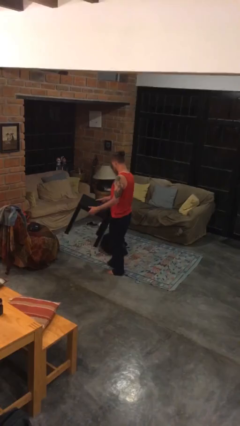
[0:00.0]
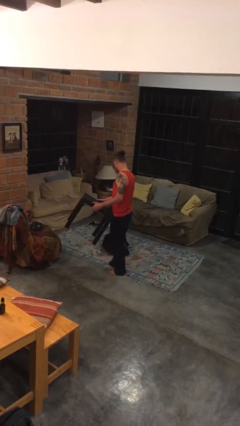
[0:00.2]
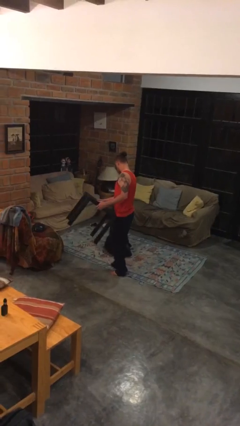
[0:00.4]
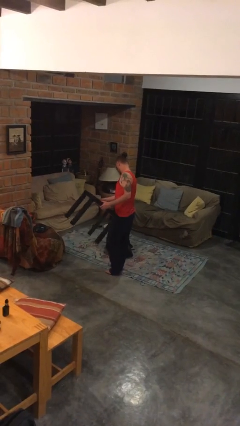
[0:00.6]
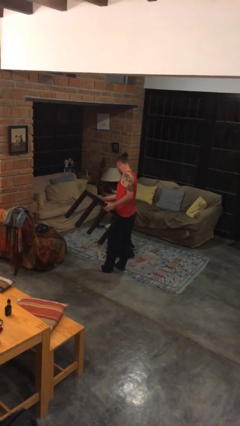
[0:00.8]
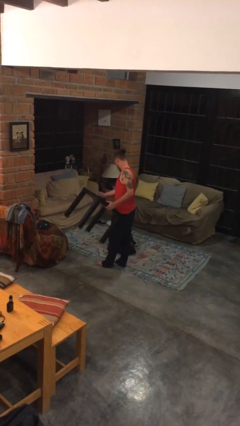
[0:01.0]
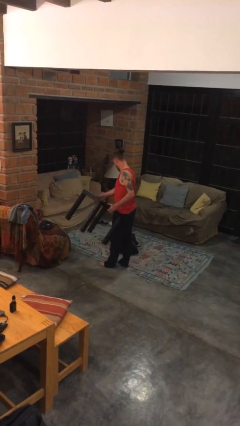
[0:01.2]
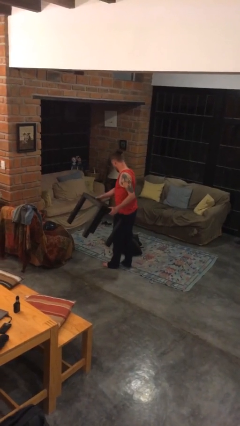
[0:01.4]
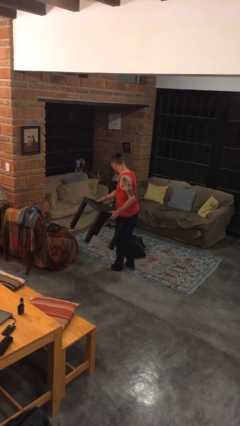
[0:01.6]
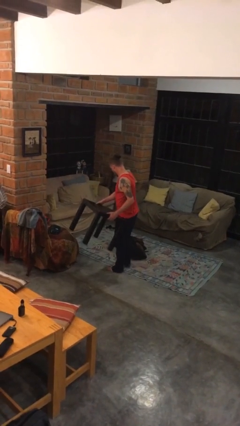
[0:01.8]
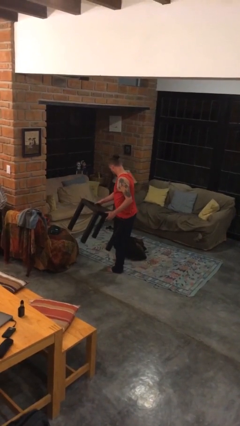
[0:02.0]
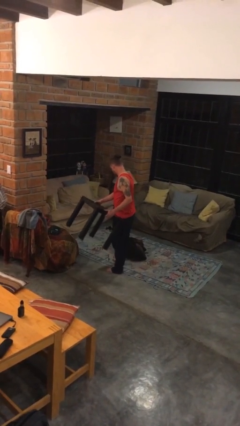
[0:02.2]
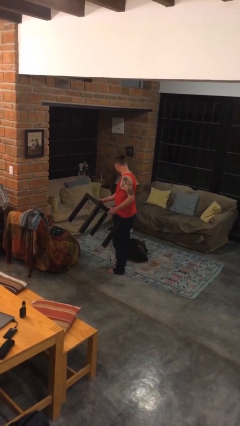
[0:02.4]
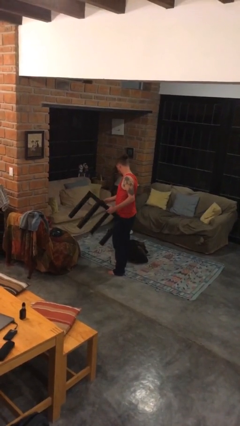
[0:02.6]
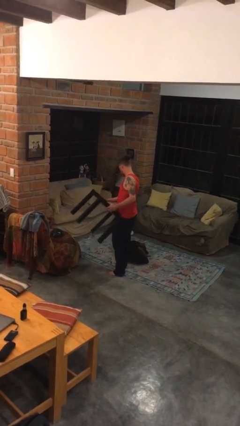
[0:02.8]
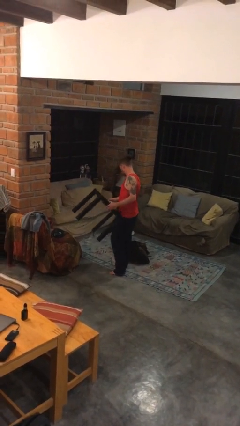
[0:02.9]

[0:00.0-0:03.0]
person carries furniture

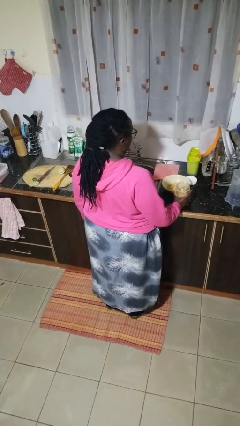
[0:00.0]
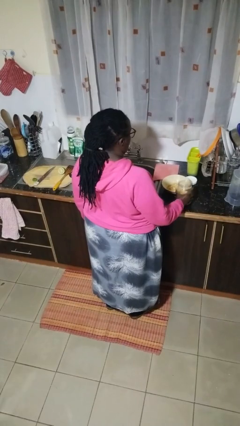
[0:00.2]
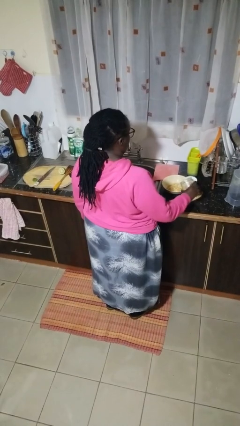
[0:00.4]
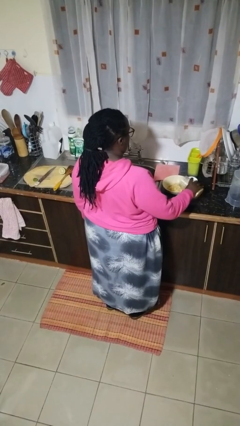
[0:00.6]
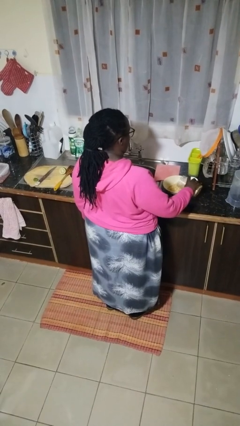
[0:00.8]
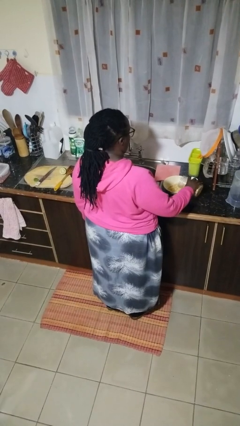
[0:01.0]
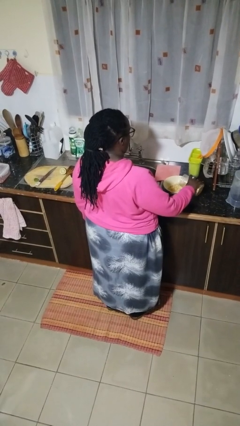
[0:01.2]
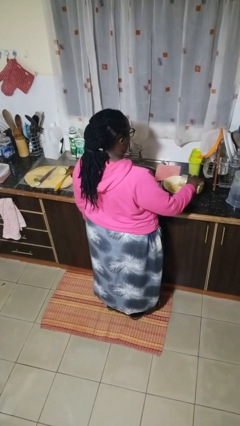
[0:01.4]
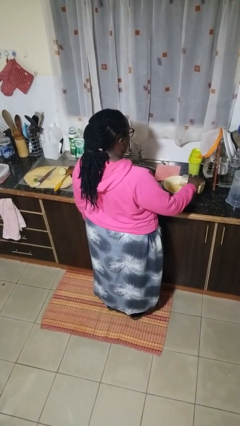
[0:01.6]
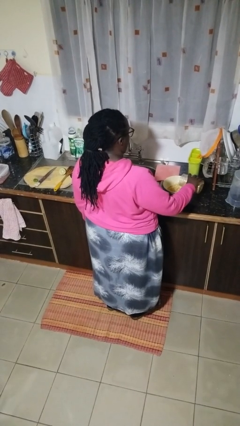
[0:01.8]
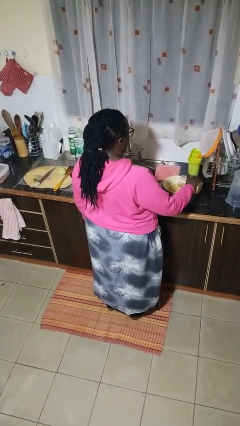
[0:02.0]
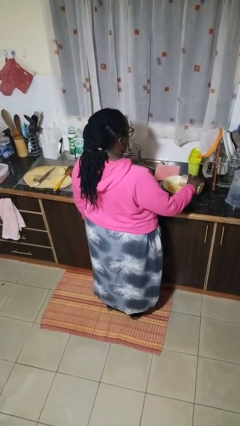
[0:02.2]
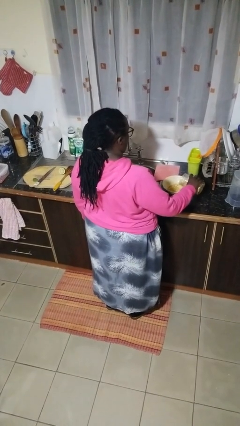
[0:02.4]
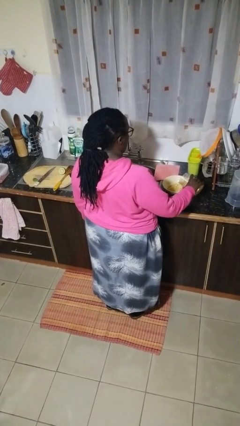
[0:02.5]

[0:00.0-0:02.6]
person pours into bowl

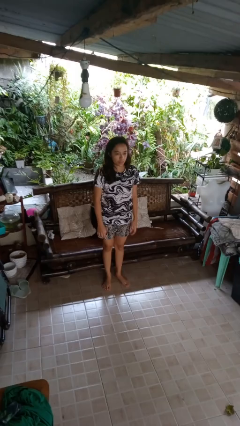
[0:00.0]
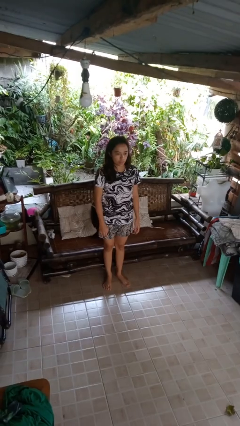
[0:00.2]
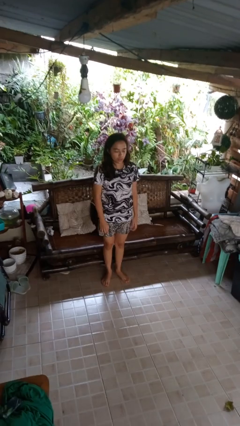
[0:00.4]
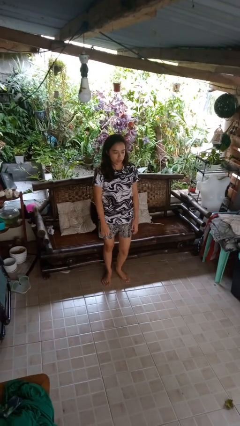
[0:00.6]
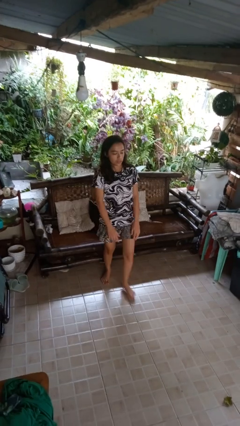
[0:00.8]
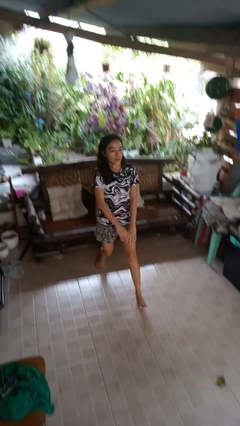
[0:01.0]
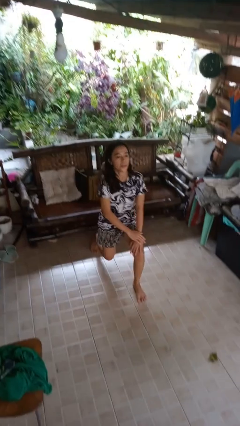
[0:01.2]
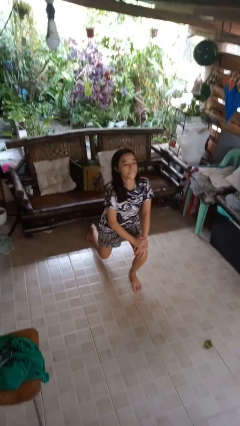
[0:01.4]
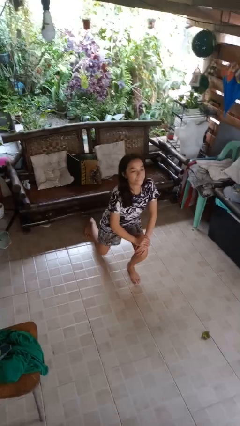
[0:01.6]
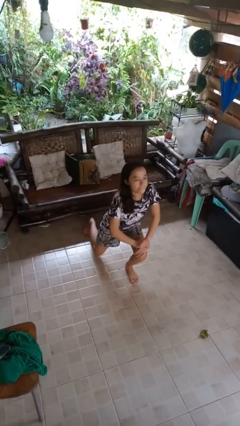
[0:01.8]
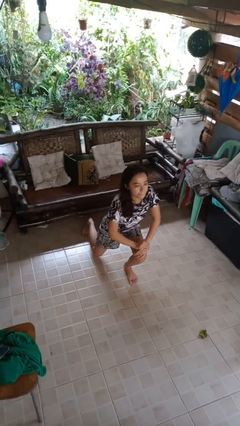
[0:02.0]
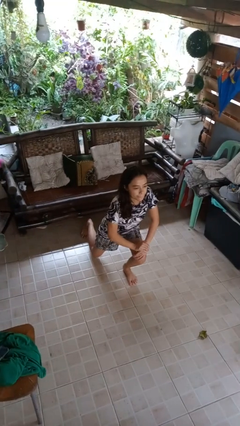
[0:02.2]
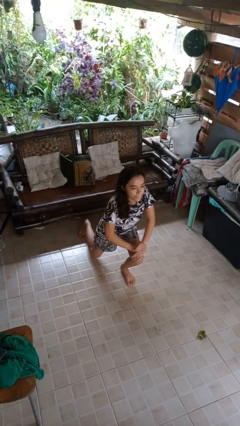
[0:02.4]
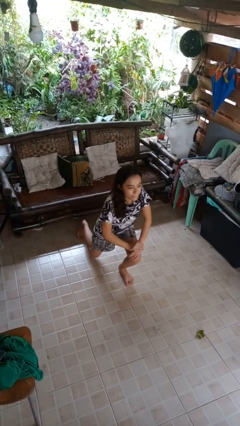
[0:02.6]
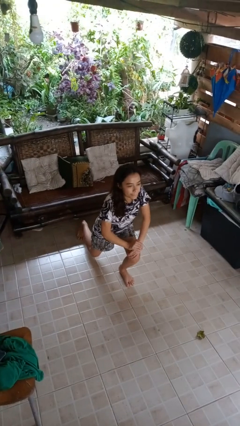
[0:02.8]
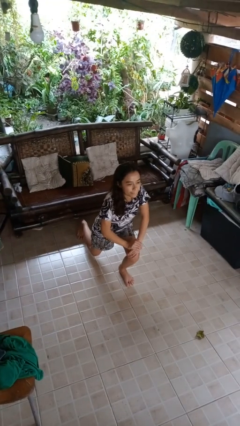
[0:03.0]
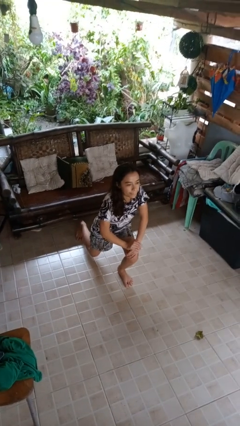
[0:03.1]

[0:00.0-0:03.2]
person exercises with lunges

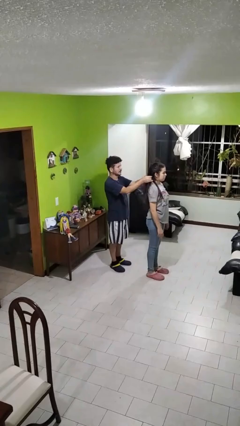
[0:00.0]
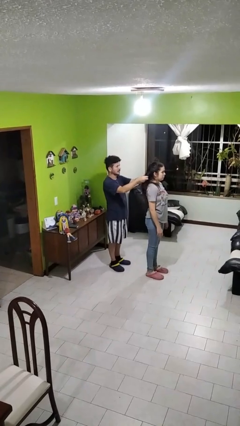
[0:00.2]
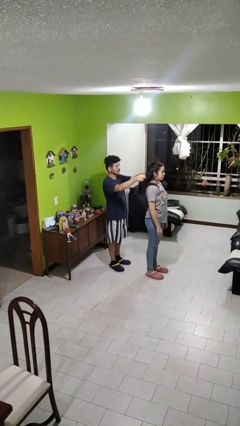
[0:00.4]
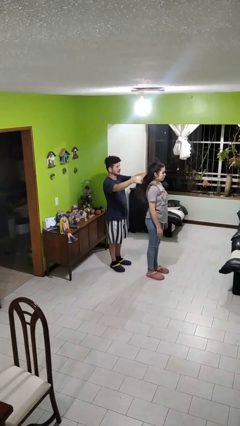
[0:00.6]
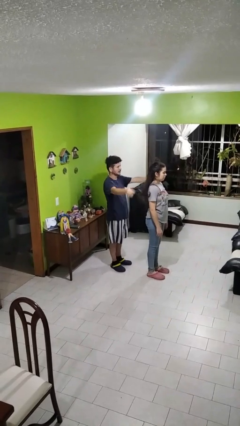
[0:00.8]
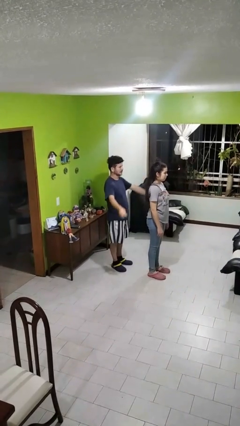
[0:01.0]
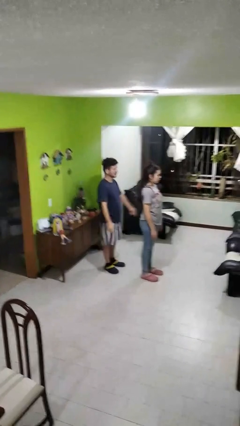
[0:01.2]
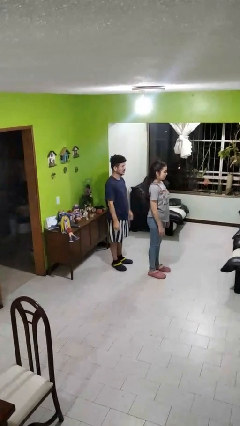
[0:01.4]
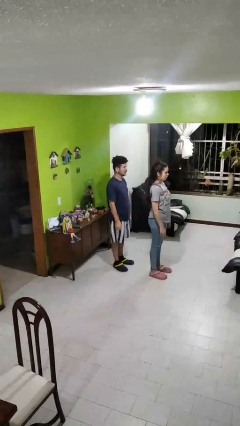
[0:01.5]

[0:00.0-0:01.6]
person grabs person by hair

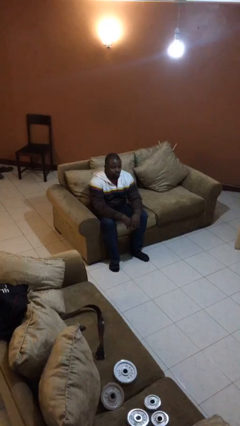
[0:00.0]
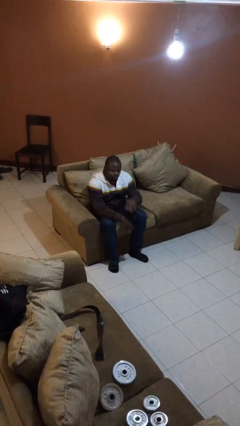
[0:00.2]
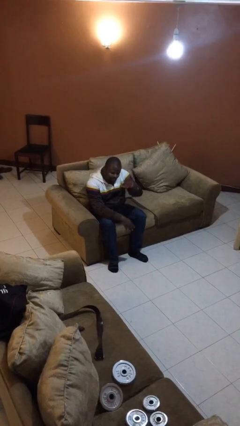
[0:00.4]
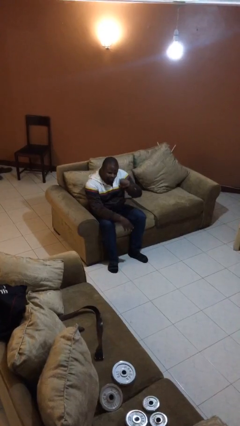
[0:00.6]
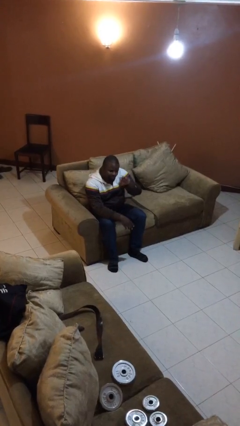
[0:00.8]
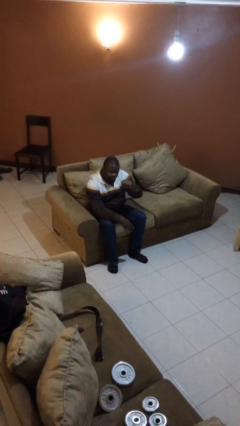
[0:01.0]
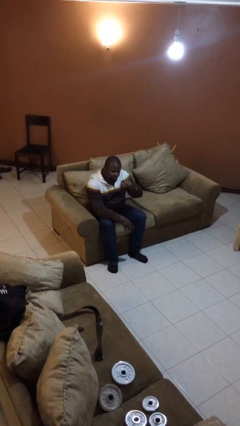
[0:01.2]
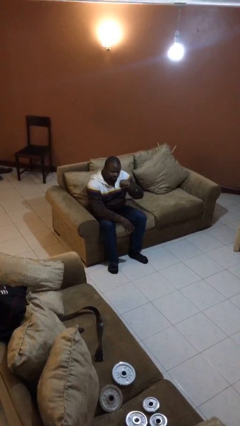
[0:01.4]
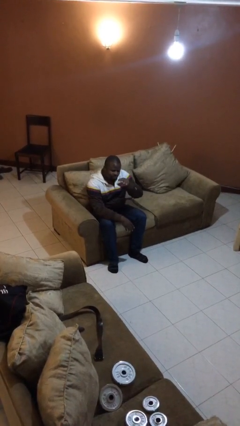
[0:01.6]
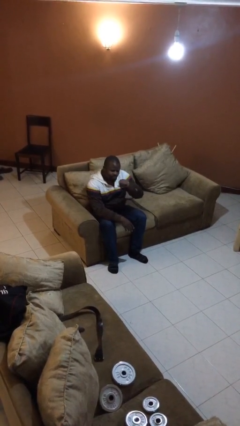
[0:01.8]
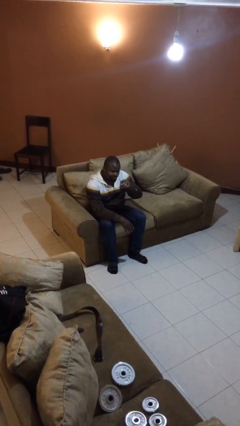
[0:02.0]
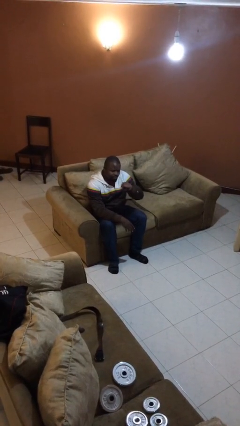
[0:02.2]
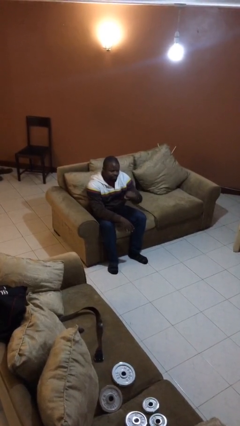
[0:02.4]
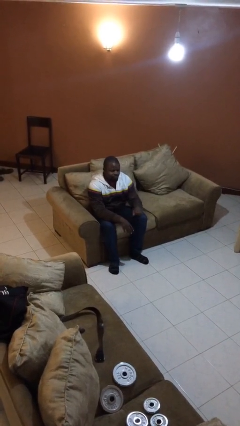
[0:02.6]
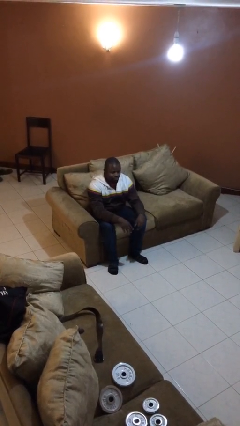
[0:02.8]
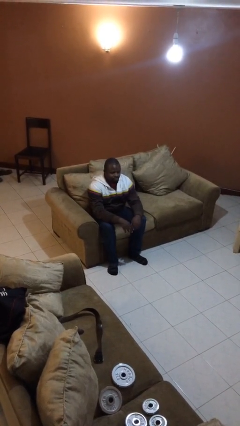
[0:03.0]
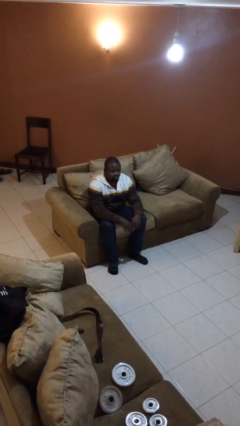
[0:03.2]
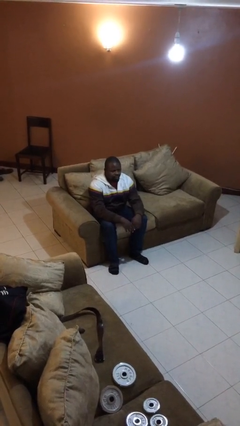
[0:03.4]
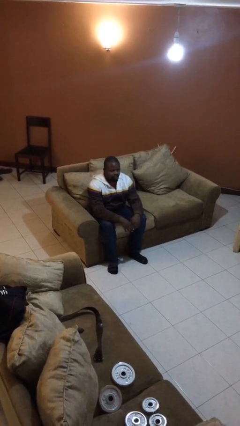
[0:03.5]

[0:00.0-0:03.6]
person gestures come here

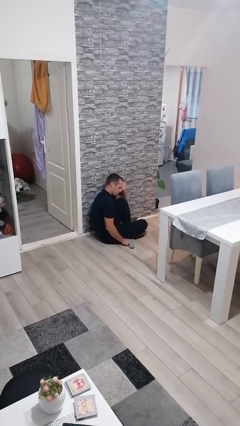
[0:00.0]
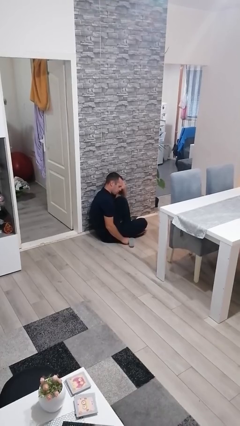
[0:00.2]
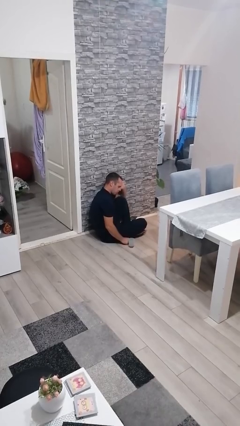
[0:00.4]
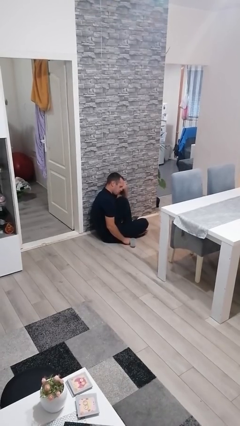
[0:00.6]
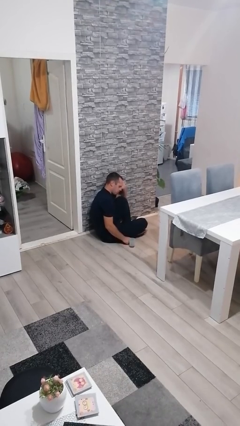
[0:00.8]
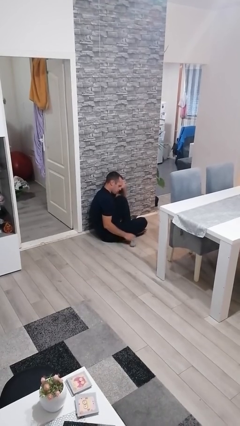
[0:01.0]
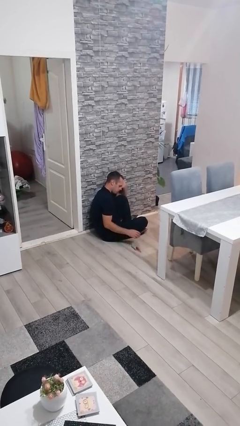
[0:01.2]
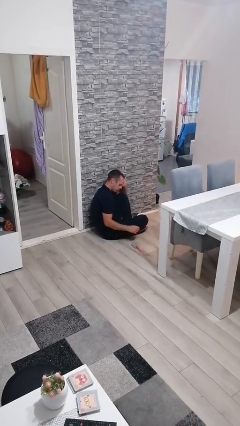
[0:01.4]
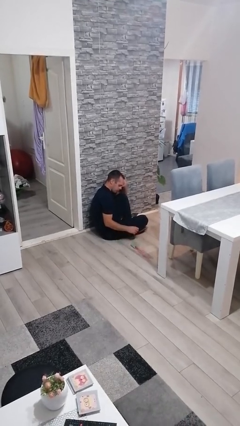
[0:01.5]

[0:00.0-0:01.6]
person spills on floor

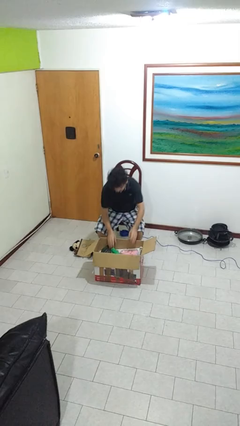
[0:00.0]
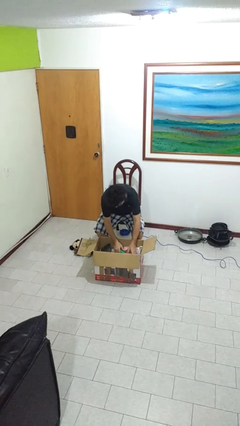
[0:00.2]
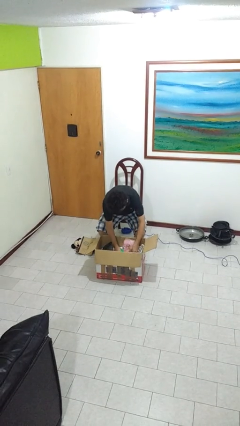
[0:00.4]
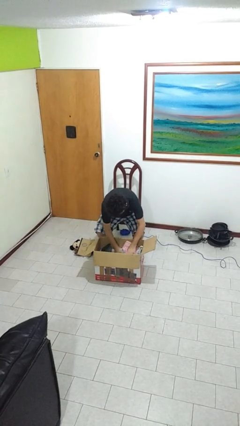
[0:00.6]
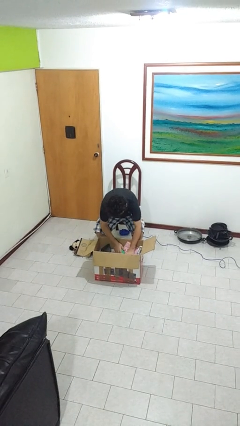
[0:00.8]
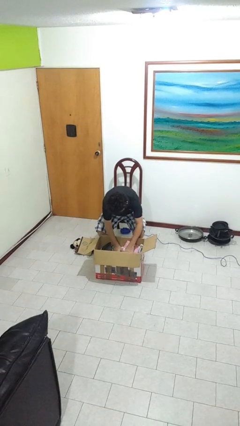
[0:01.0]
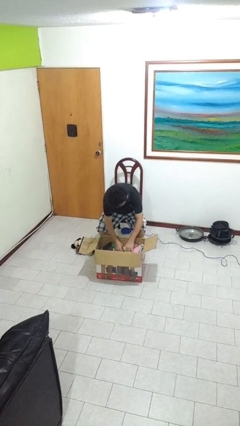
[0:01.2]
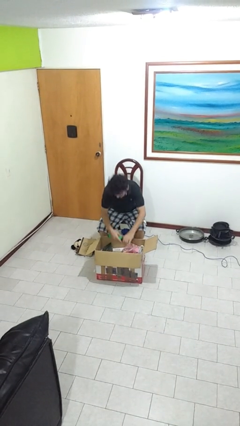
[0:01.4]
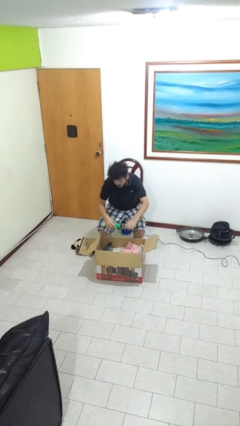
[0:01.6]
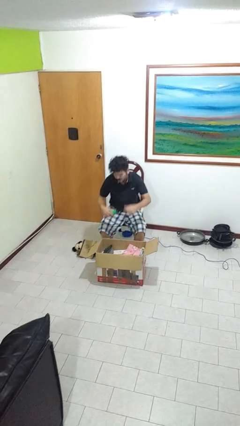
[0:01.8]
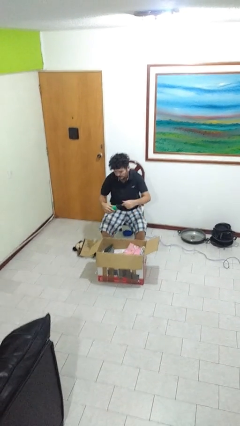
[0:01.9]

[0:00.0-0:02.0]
person searches in box
